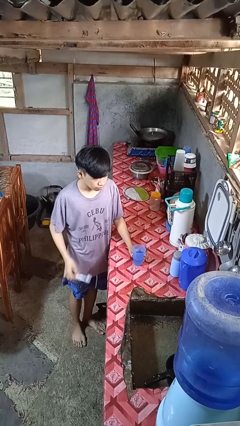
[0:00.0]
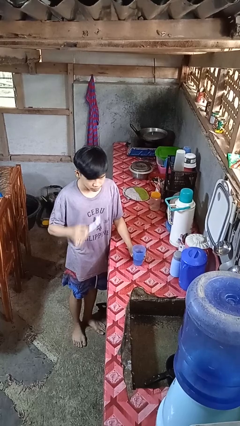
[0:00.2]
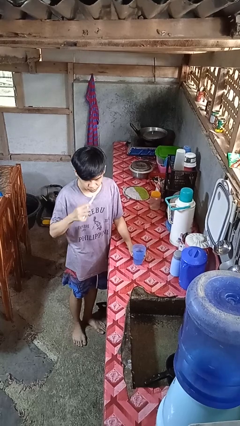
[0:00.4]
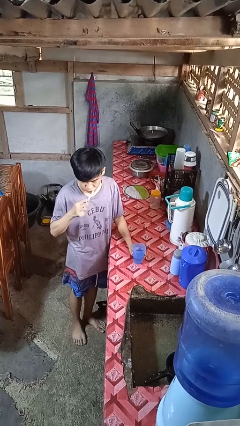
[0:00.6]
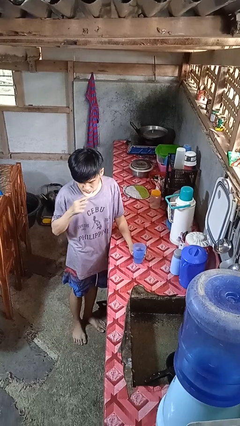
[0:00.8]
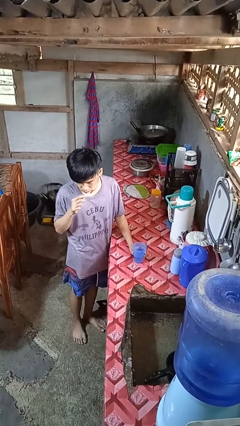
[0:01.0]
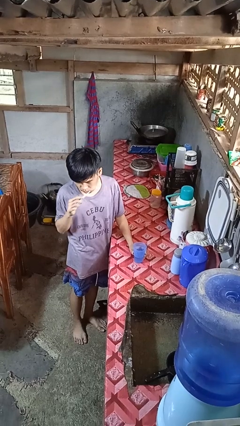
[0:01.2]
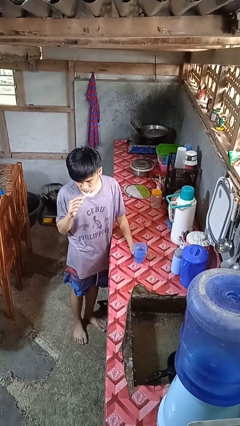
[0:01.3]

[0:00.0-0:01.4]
person brushes teeth

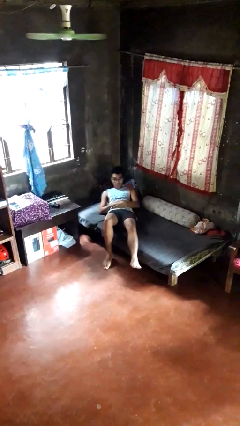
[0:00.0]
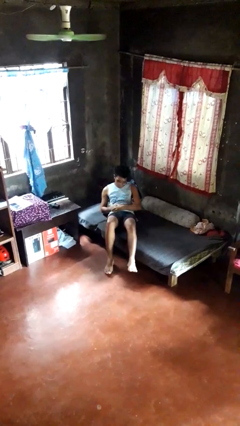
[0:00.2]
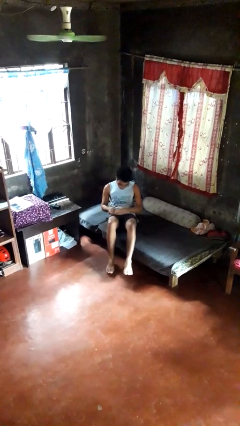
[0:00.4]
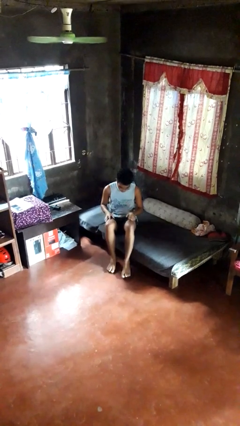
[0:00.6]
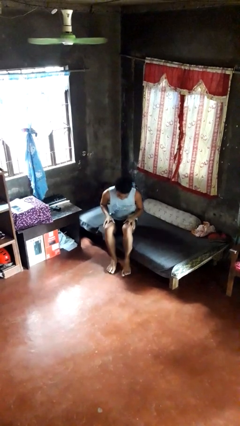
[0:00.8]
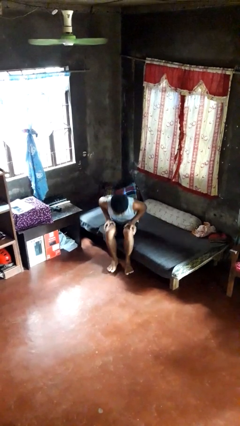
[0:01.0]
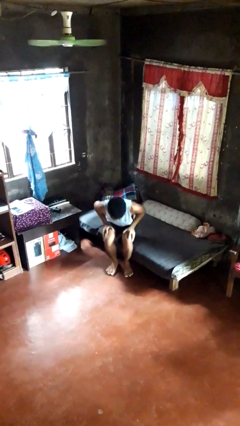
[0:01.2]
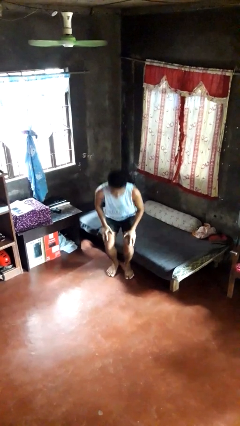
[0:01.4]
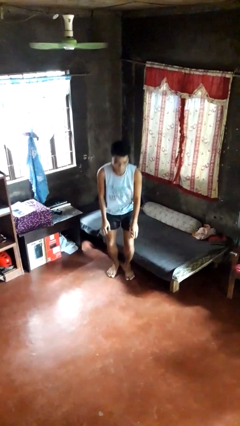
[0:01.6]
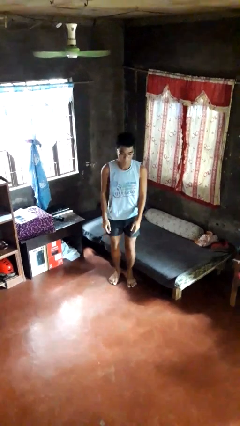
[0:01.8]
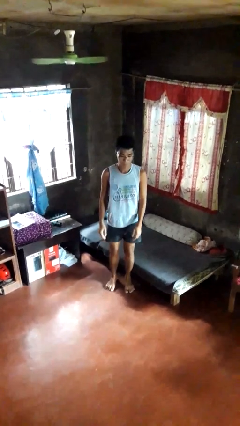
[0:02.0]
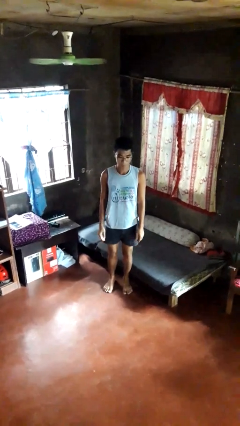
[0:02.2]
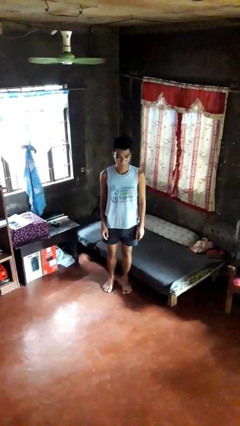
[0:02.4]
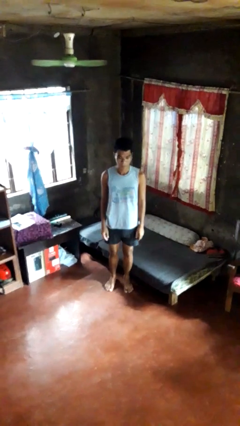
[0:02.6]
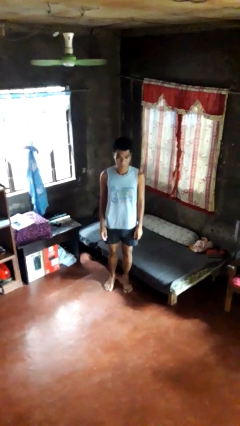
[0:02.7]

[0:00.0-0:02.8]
person stands up

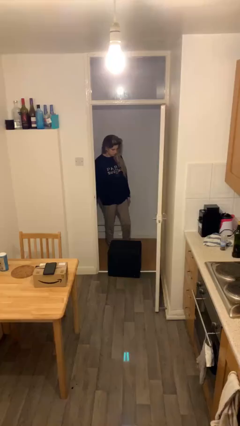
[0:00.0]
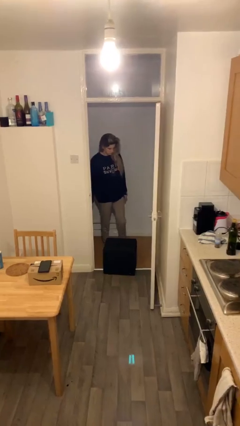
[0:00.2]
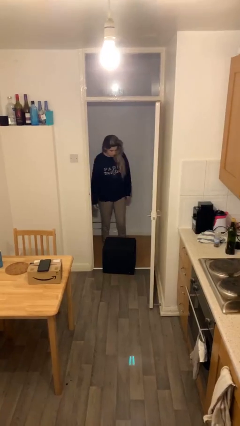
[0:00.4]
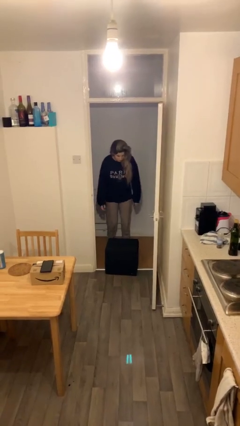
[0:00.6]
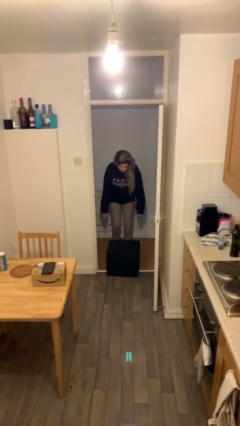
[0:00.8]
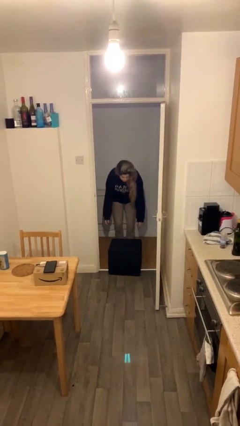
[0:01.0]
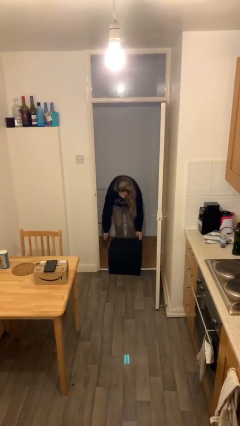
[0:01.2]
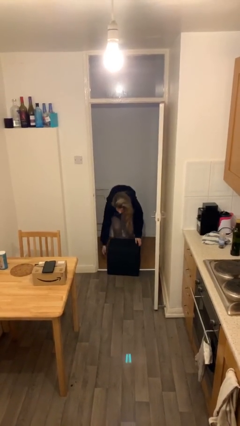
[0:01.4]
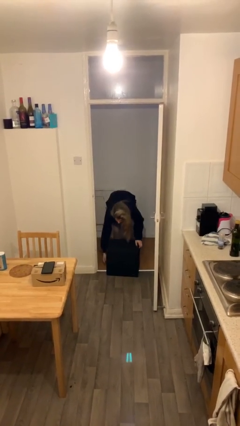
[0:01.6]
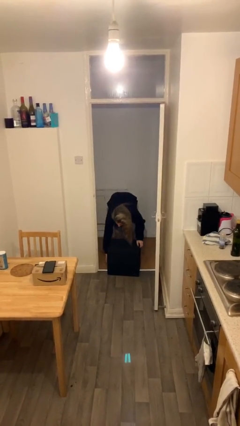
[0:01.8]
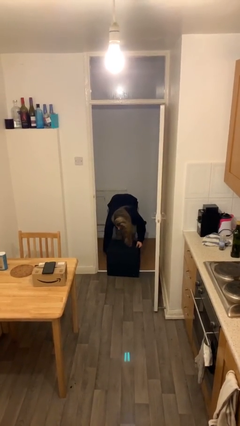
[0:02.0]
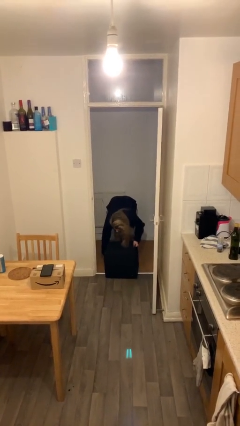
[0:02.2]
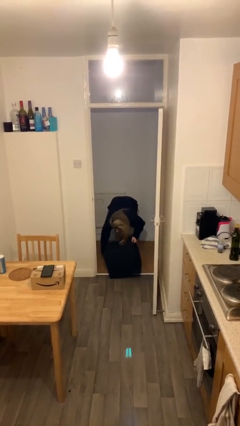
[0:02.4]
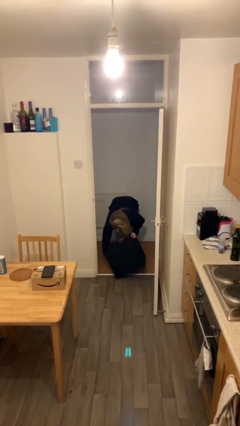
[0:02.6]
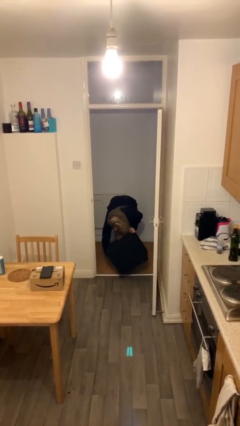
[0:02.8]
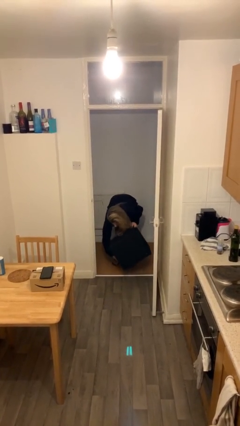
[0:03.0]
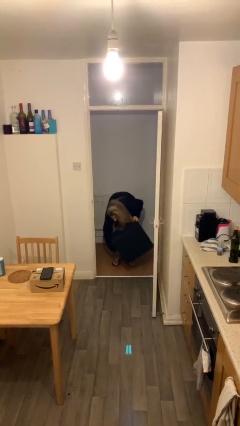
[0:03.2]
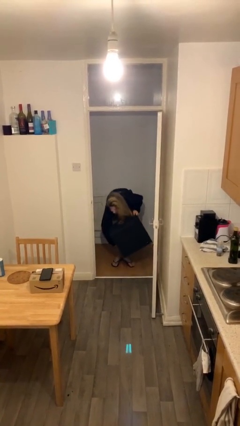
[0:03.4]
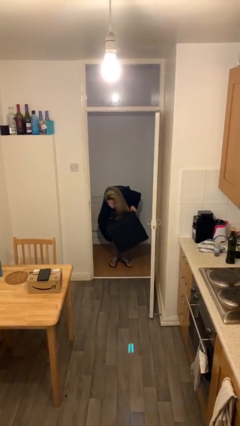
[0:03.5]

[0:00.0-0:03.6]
person picks up object from floor

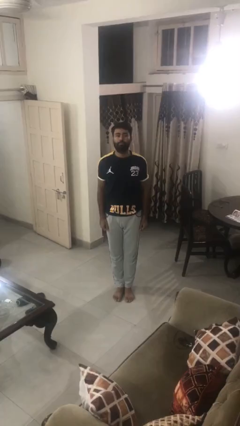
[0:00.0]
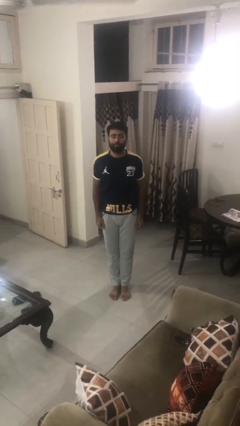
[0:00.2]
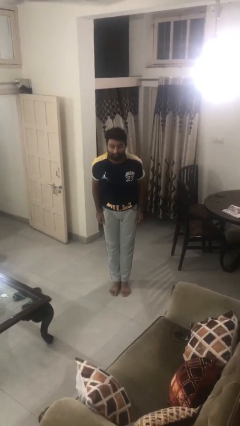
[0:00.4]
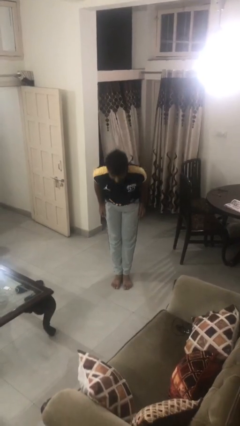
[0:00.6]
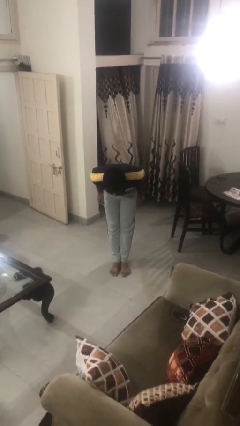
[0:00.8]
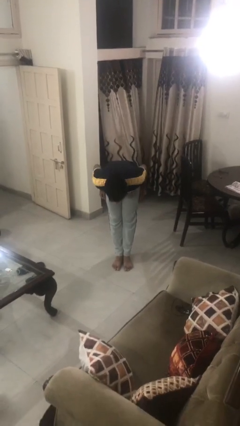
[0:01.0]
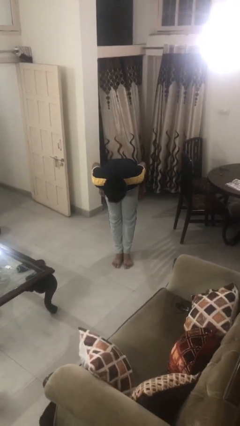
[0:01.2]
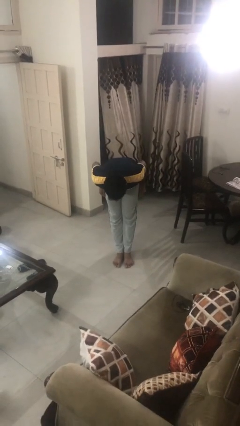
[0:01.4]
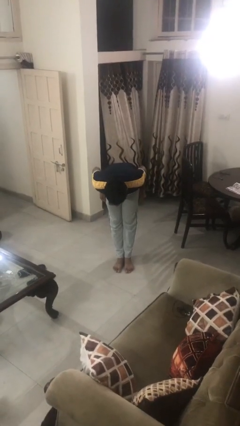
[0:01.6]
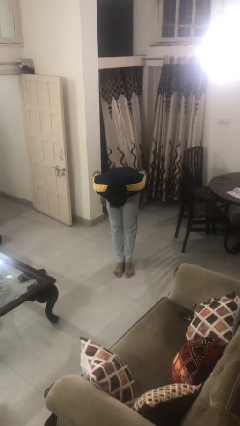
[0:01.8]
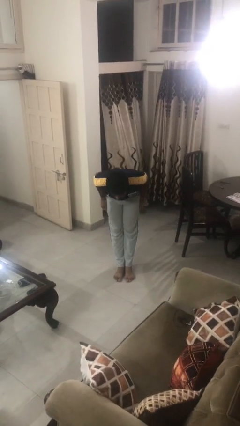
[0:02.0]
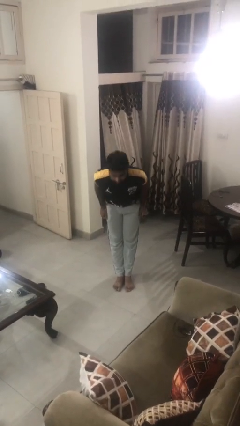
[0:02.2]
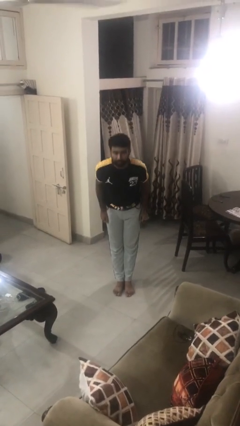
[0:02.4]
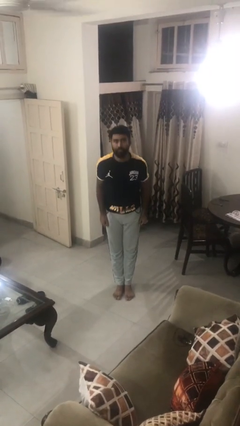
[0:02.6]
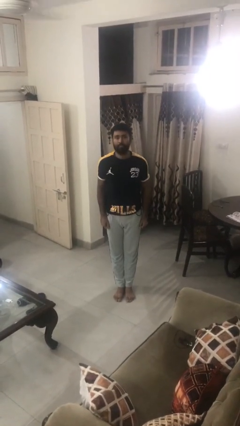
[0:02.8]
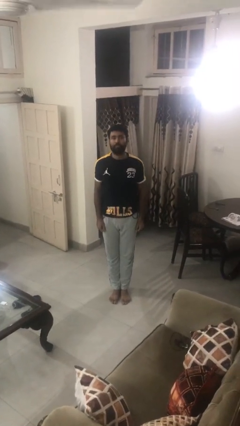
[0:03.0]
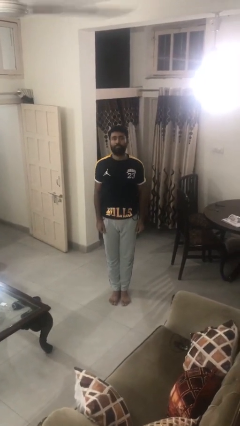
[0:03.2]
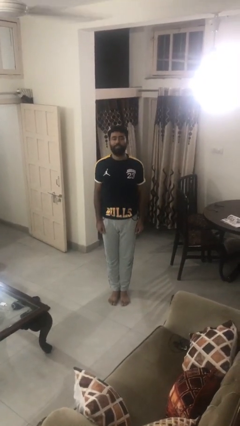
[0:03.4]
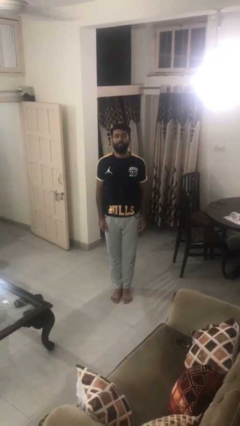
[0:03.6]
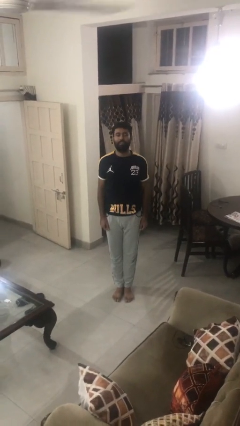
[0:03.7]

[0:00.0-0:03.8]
person bows

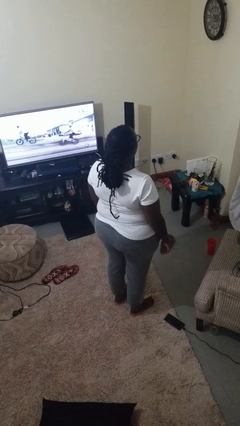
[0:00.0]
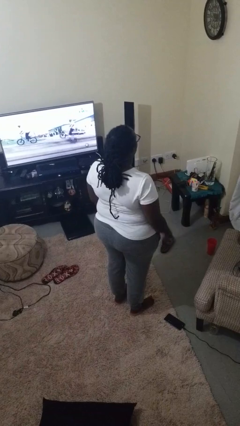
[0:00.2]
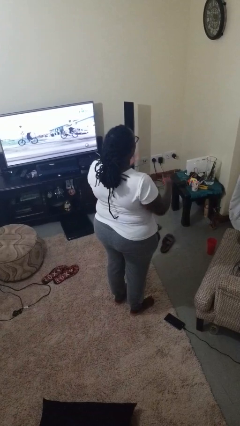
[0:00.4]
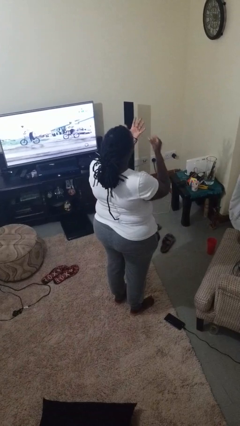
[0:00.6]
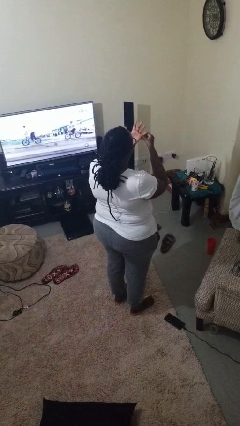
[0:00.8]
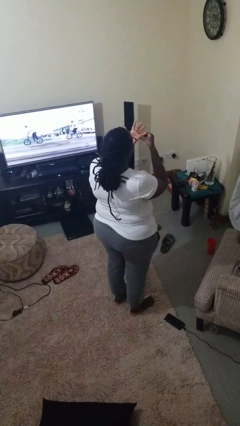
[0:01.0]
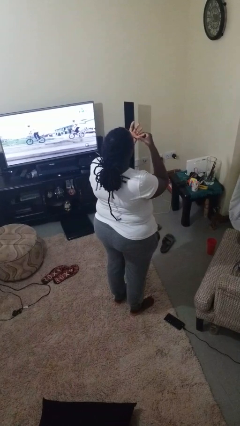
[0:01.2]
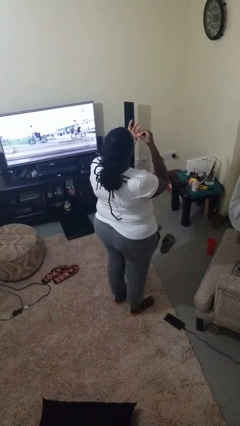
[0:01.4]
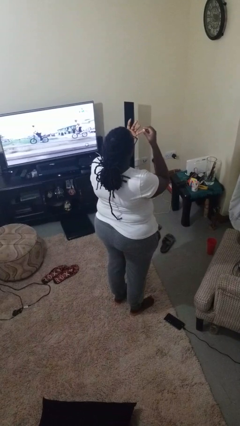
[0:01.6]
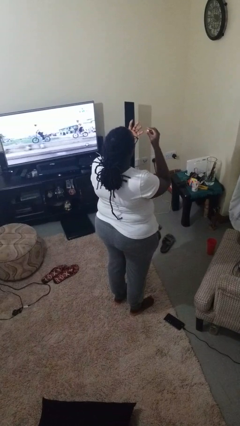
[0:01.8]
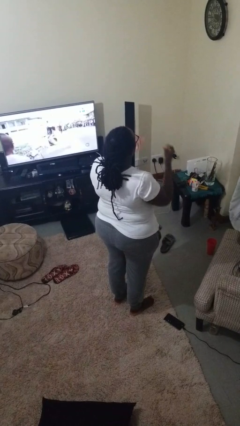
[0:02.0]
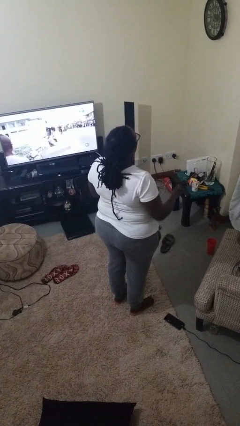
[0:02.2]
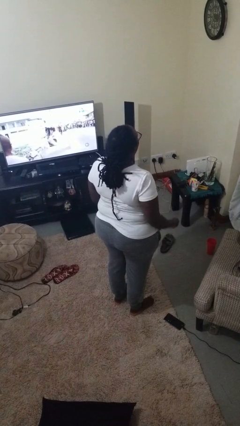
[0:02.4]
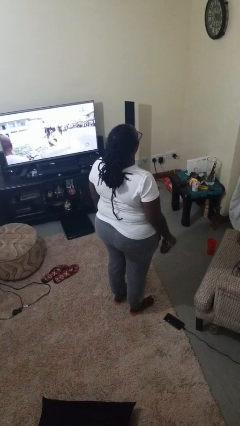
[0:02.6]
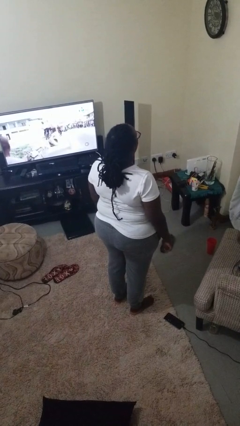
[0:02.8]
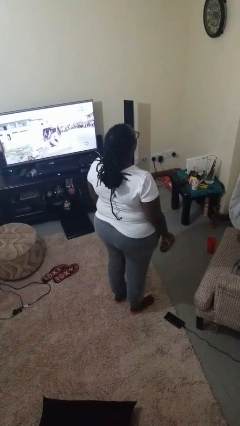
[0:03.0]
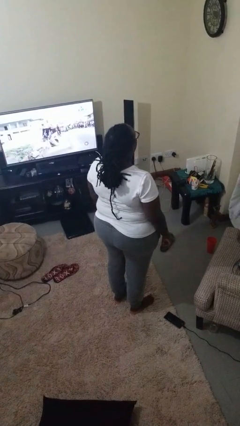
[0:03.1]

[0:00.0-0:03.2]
person takes off ring

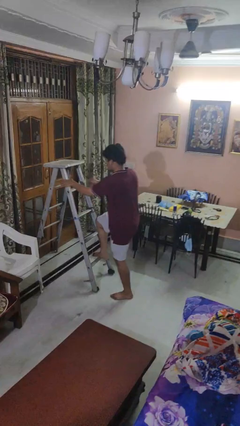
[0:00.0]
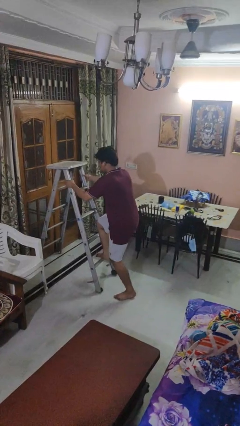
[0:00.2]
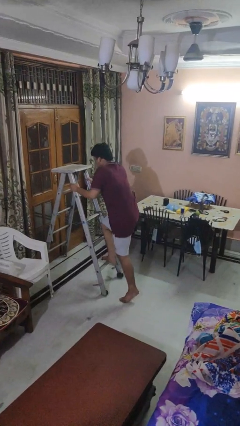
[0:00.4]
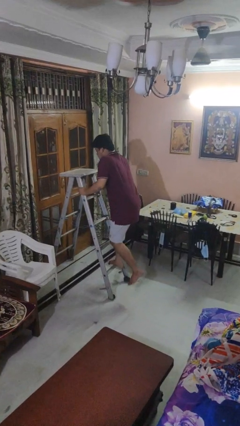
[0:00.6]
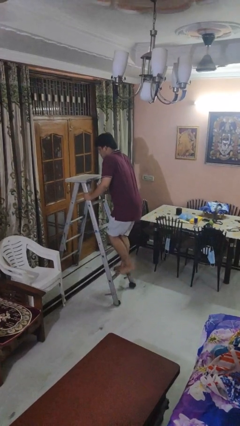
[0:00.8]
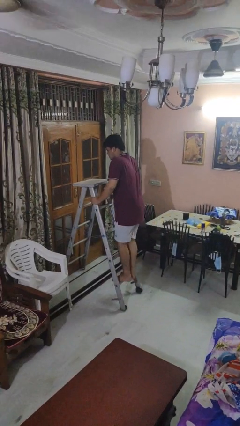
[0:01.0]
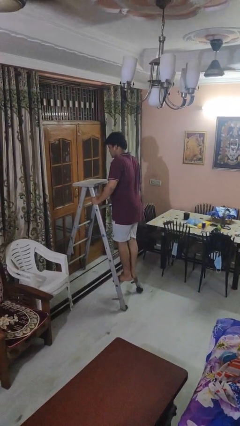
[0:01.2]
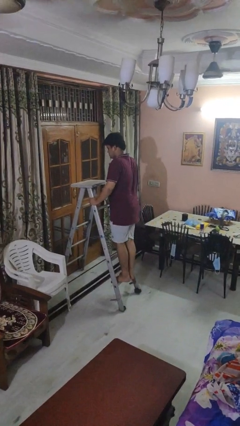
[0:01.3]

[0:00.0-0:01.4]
person climbs up ladder

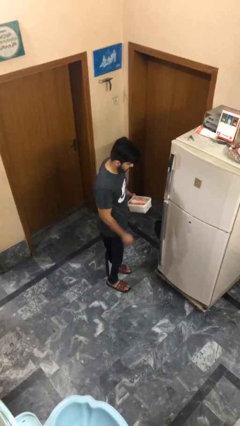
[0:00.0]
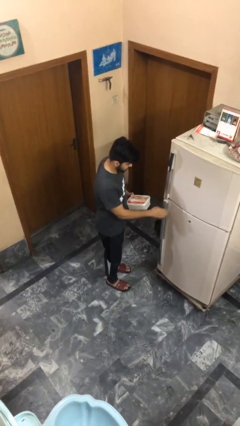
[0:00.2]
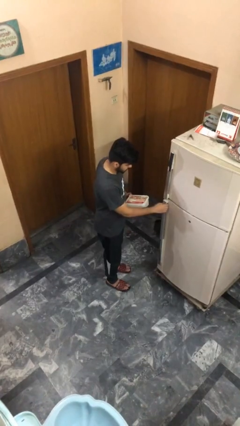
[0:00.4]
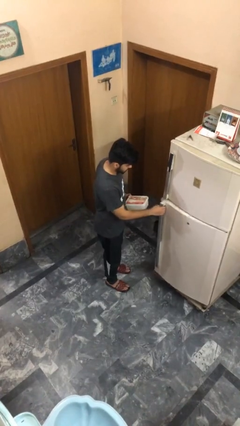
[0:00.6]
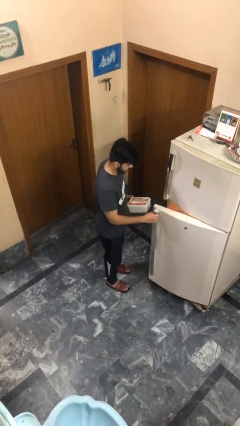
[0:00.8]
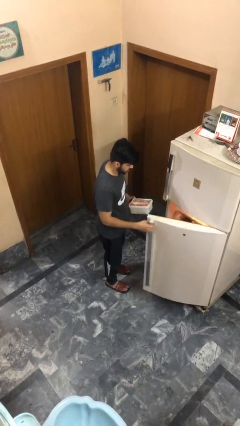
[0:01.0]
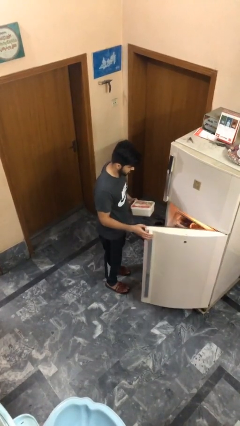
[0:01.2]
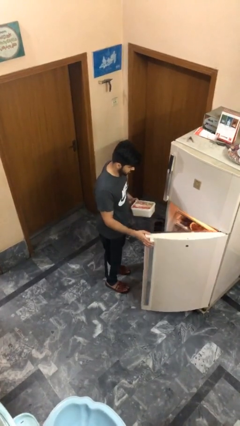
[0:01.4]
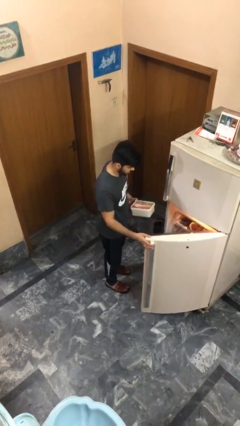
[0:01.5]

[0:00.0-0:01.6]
person opens refrigerator
